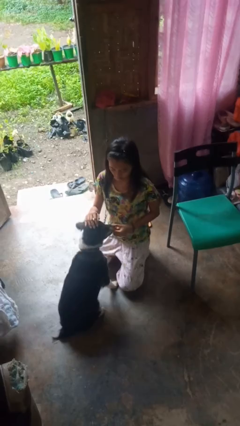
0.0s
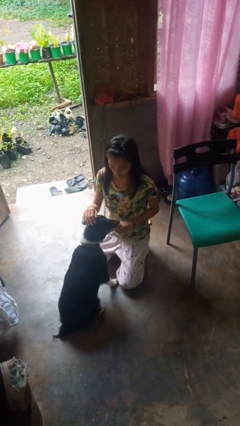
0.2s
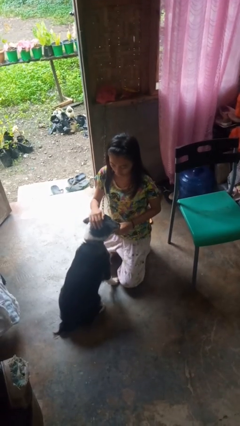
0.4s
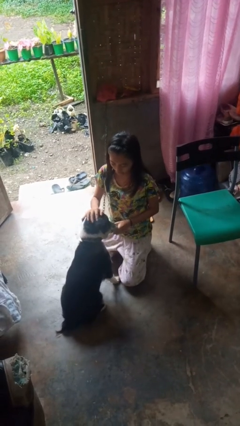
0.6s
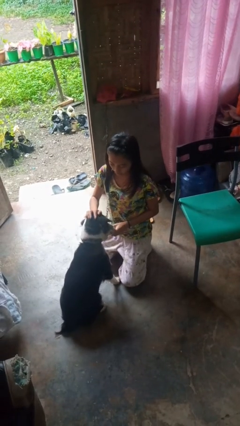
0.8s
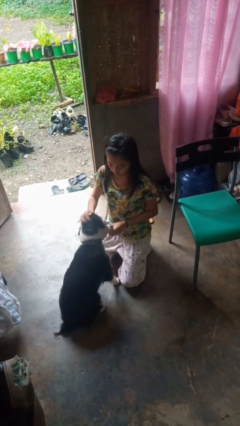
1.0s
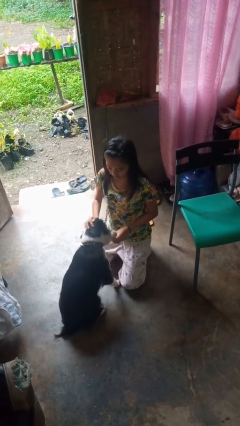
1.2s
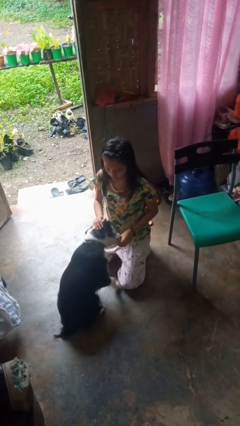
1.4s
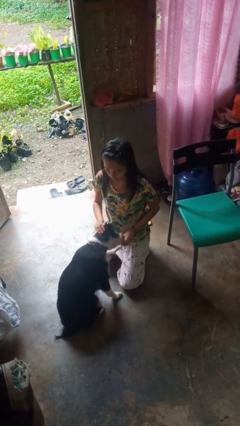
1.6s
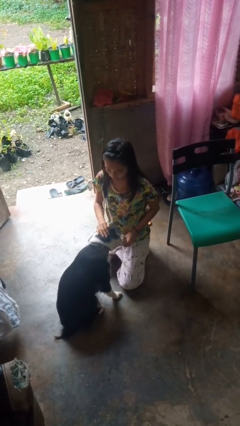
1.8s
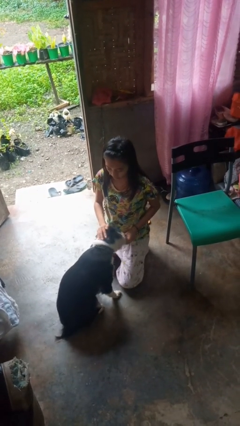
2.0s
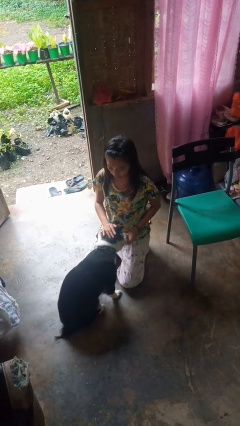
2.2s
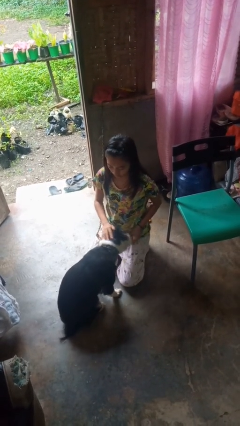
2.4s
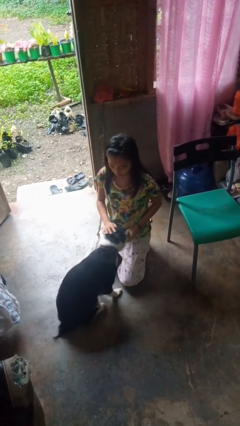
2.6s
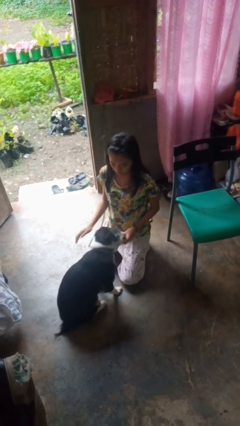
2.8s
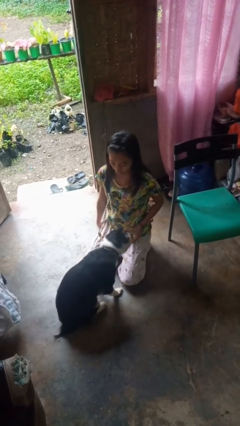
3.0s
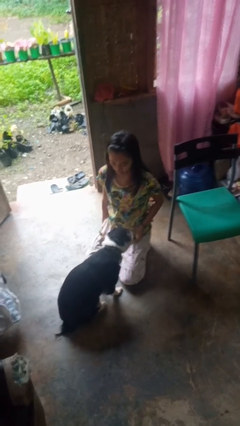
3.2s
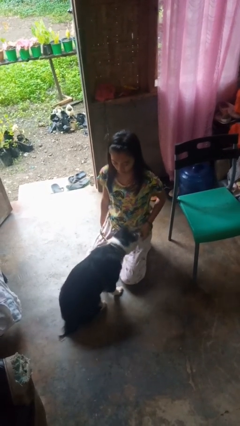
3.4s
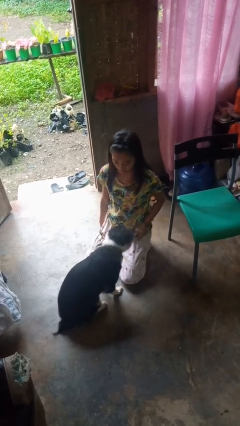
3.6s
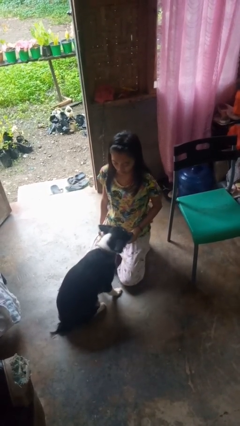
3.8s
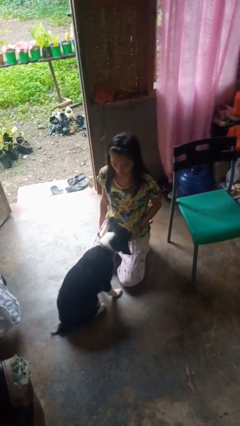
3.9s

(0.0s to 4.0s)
person pets dog

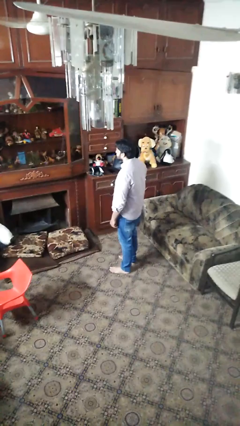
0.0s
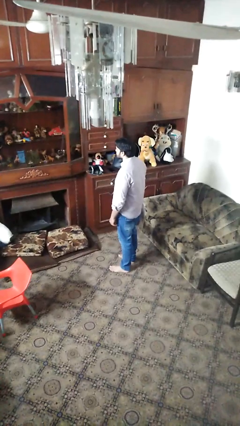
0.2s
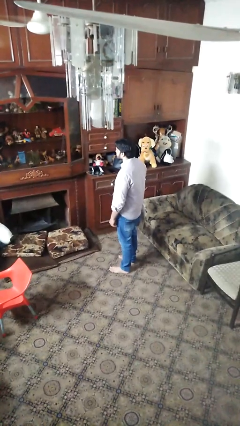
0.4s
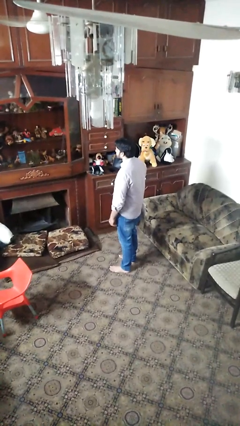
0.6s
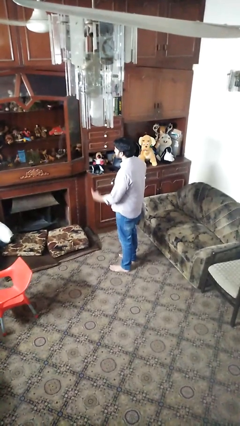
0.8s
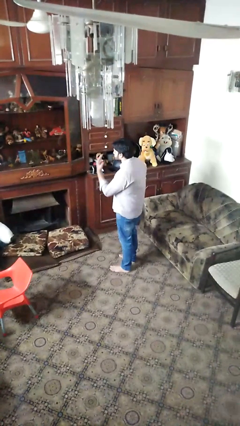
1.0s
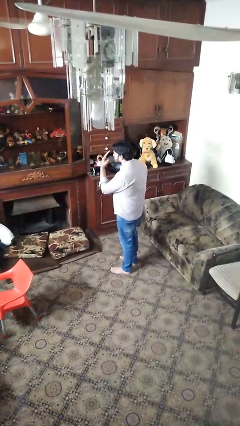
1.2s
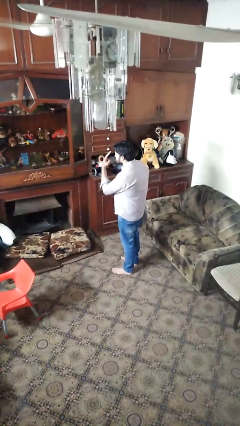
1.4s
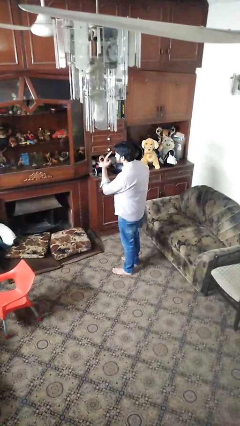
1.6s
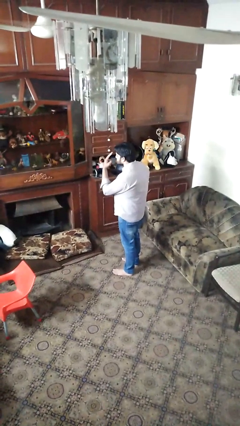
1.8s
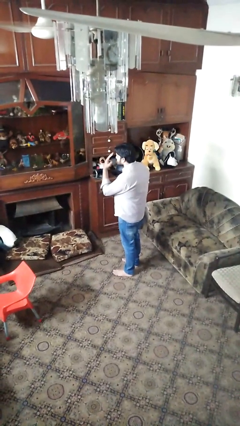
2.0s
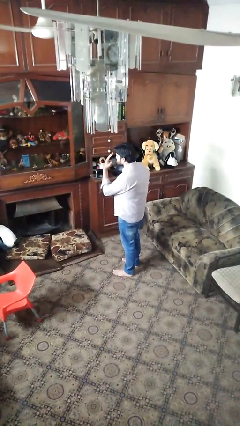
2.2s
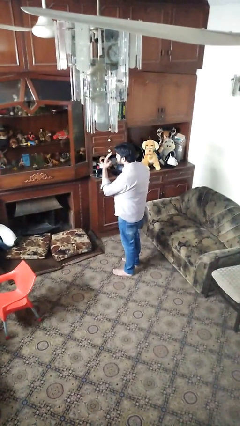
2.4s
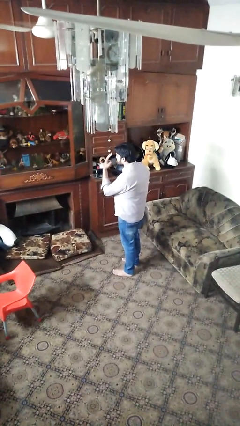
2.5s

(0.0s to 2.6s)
person gestures watch closely

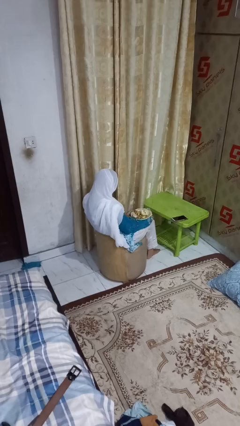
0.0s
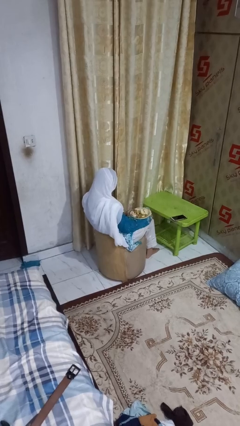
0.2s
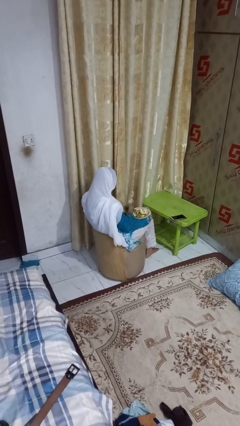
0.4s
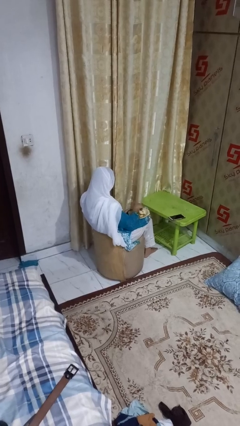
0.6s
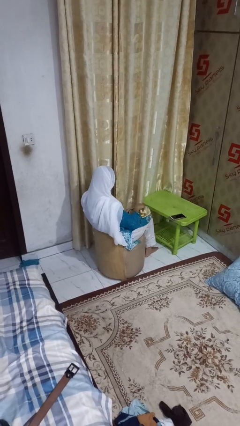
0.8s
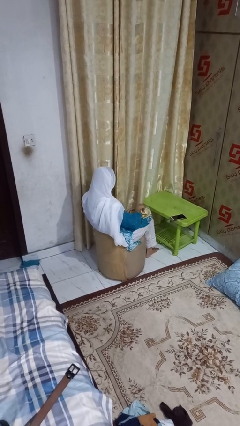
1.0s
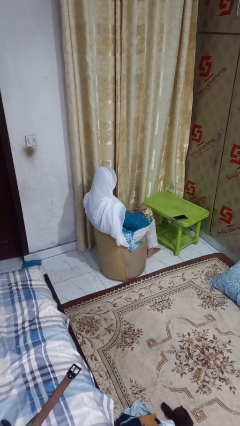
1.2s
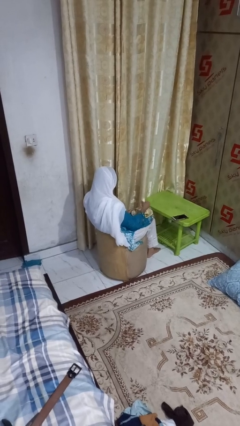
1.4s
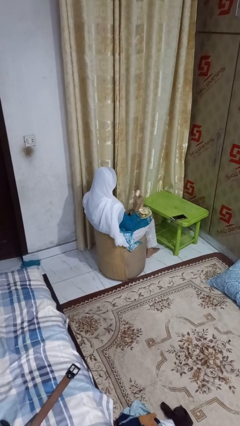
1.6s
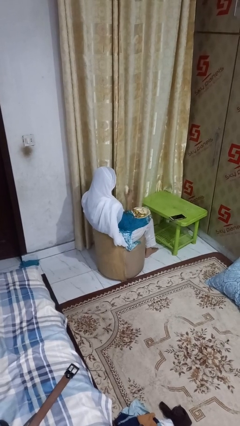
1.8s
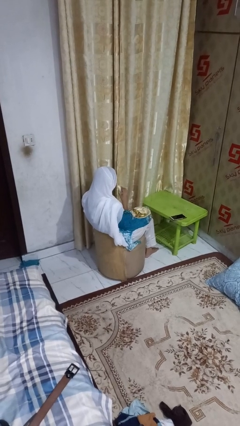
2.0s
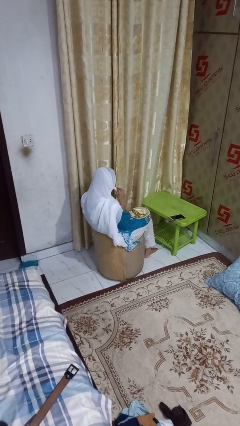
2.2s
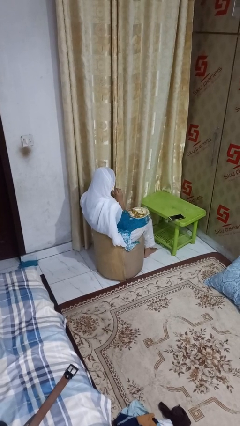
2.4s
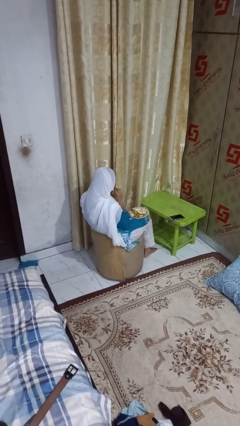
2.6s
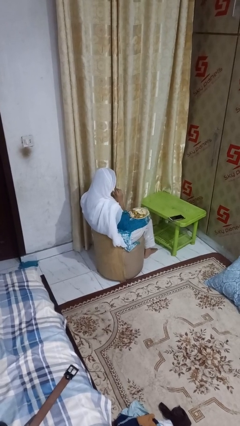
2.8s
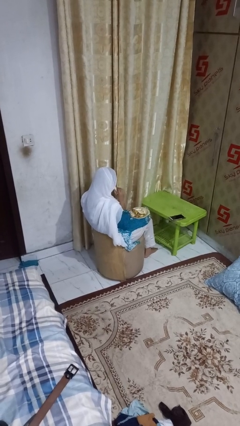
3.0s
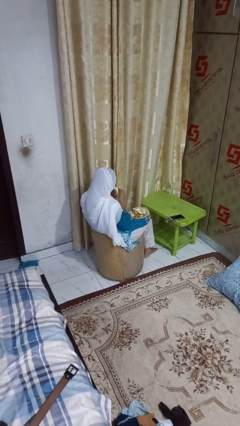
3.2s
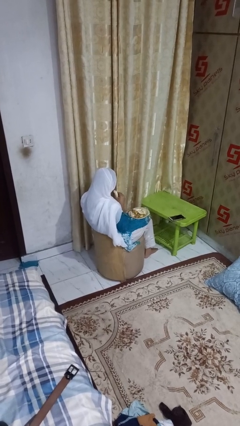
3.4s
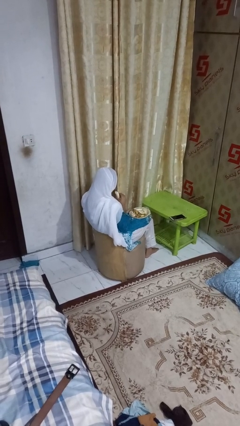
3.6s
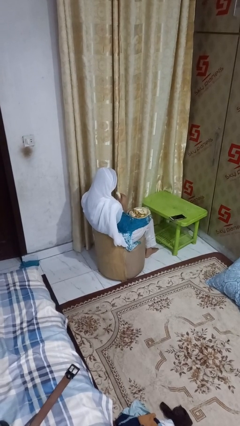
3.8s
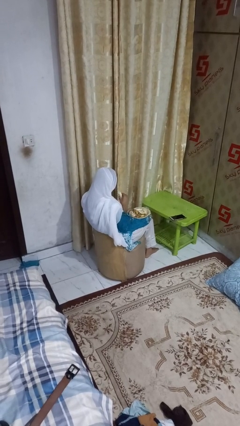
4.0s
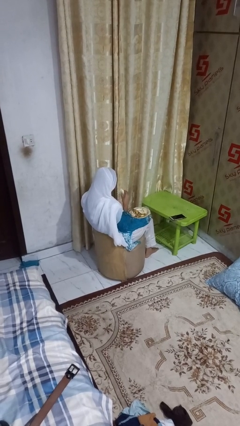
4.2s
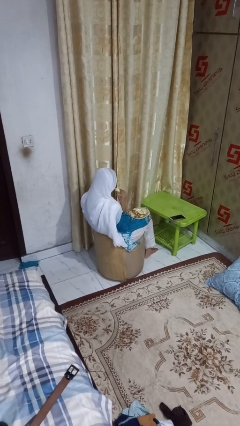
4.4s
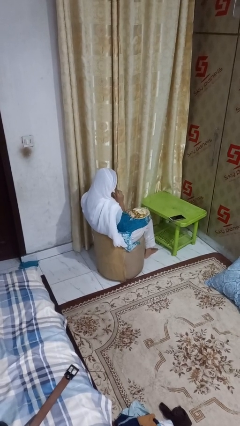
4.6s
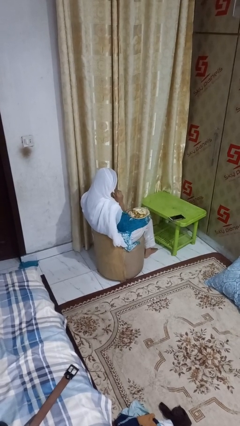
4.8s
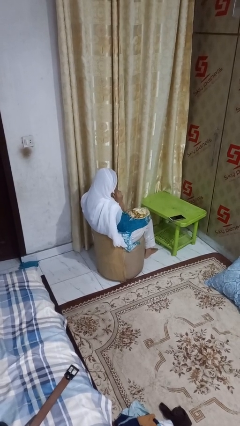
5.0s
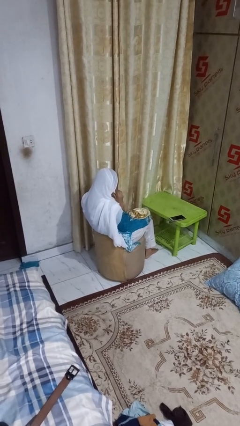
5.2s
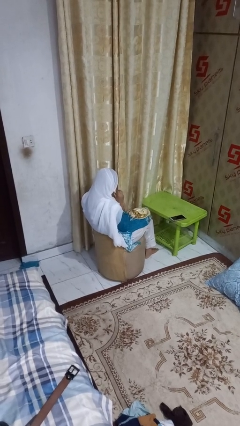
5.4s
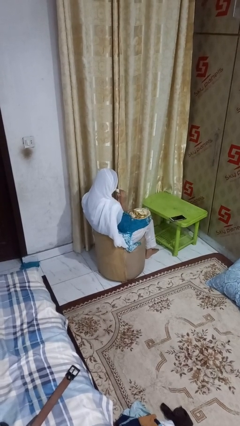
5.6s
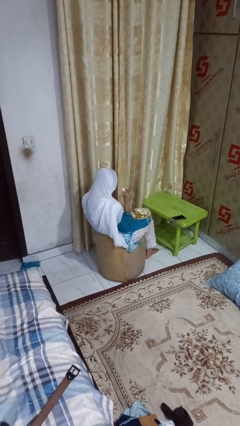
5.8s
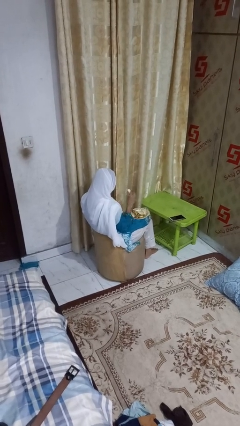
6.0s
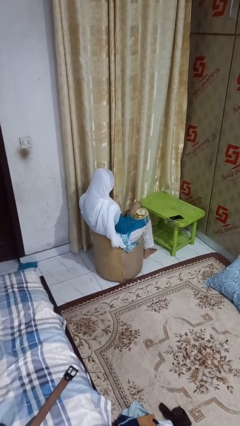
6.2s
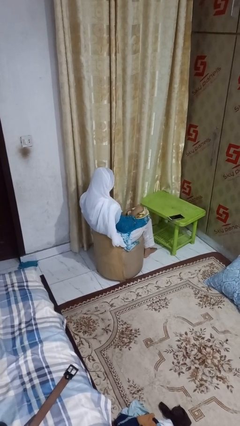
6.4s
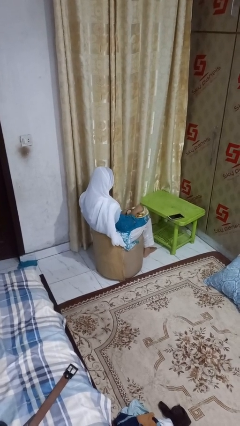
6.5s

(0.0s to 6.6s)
person eats with hands

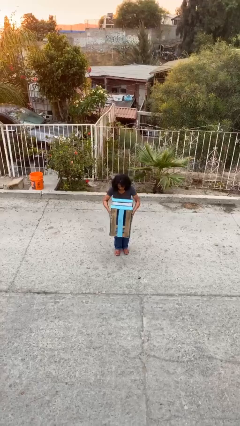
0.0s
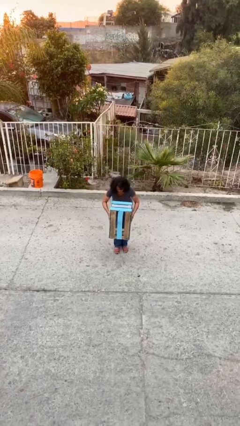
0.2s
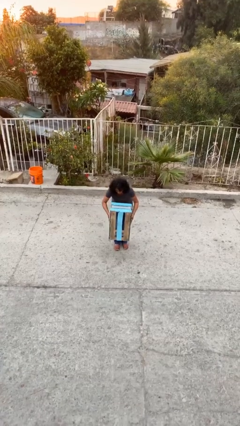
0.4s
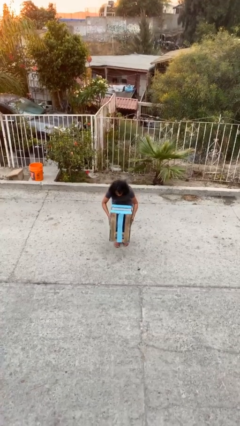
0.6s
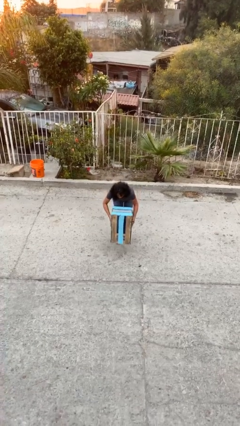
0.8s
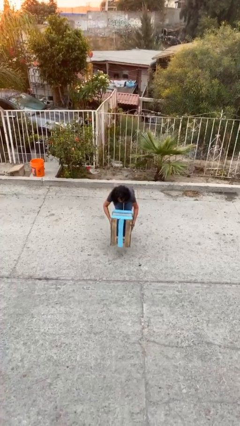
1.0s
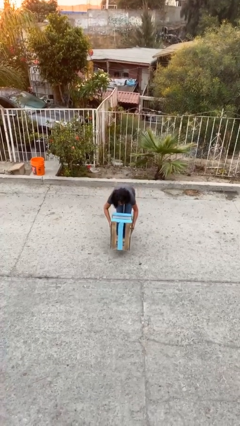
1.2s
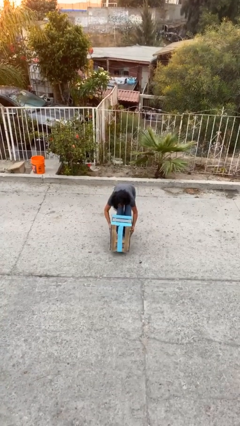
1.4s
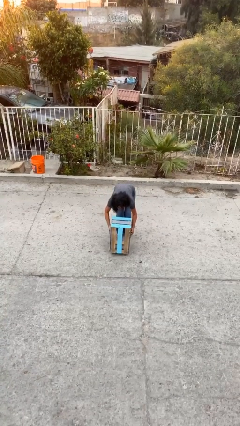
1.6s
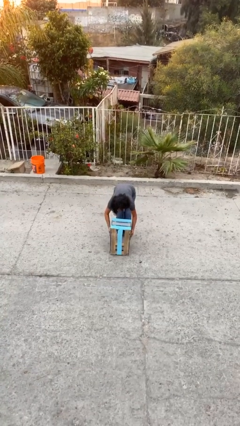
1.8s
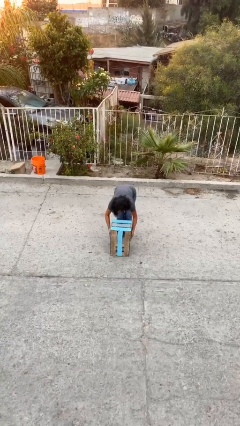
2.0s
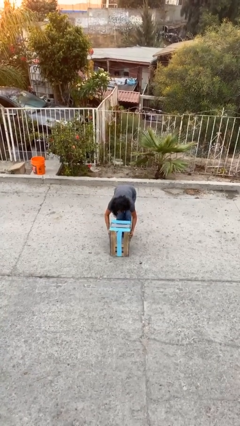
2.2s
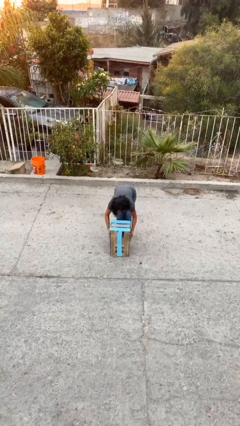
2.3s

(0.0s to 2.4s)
person puts down object on floor

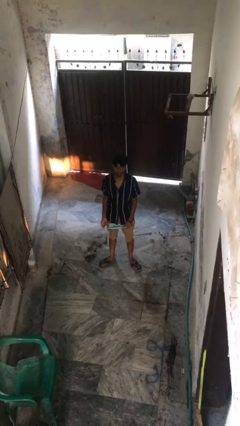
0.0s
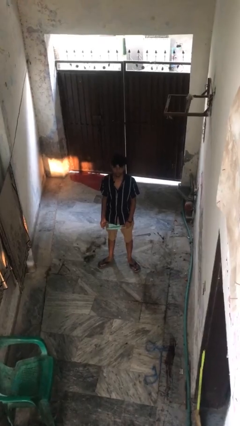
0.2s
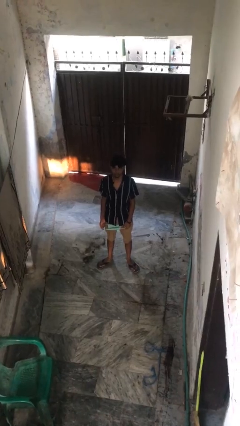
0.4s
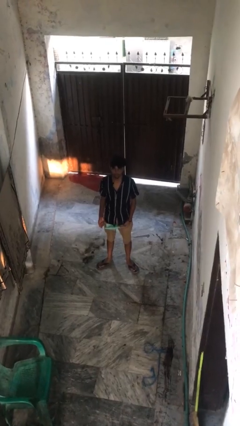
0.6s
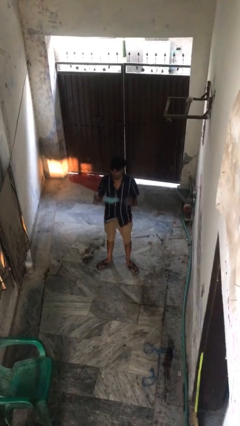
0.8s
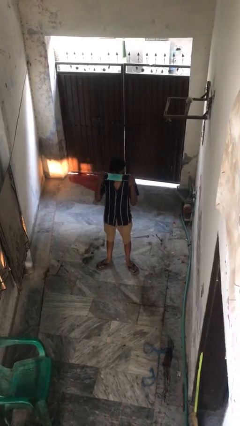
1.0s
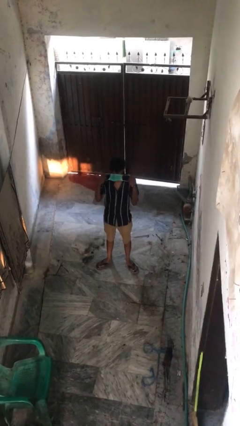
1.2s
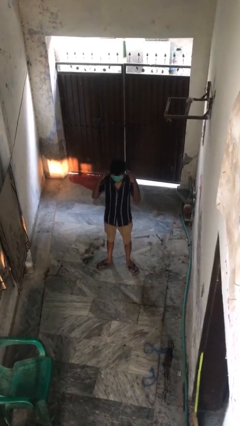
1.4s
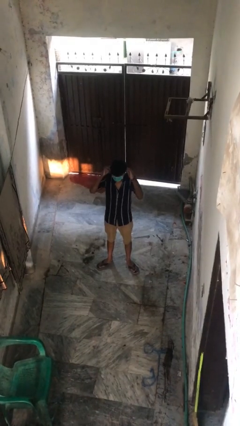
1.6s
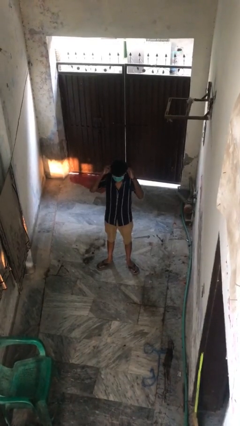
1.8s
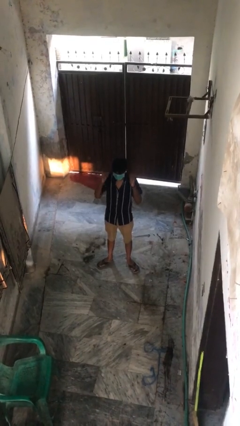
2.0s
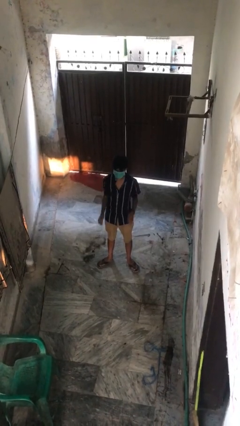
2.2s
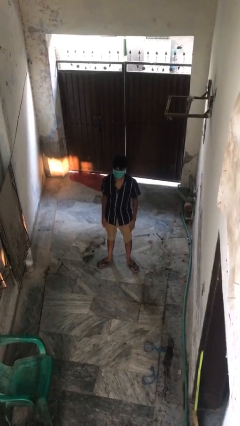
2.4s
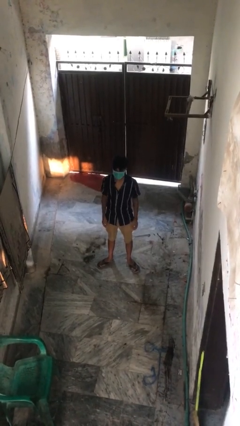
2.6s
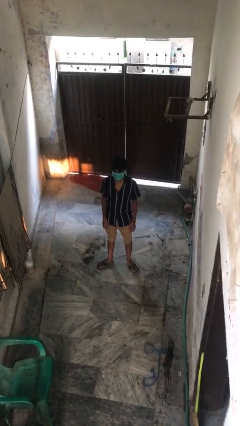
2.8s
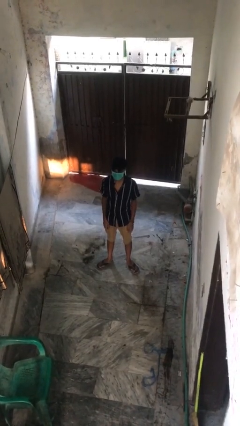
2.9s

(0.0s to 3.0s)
person puts on facemask
